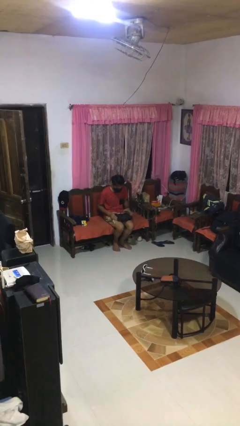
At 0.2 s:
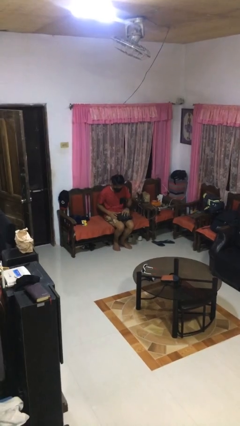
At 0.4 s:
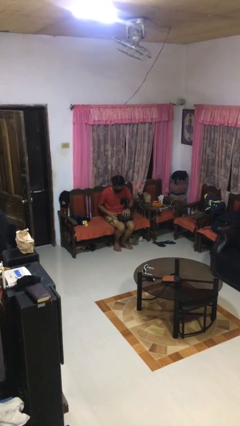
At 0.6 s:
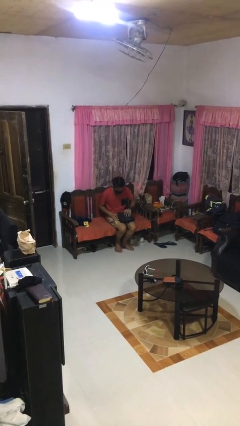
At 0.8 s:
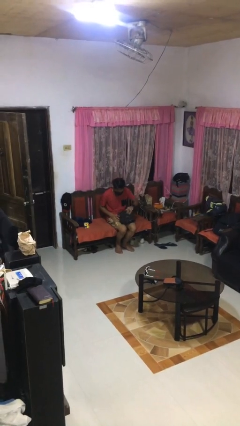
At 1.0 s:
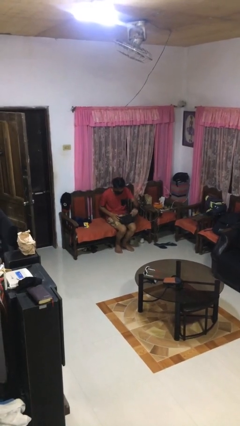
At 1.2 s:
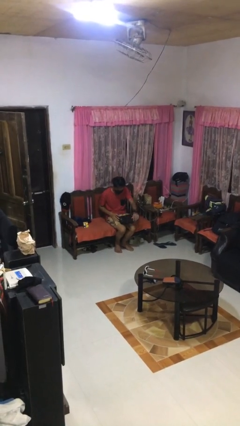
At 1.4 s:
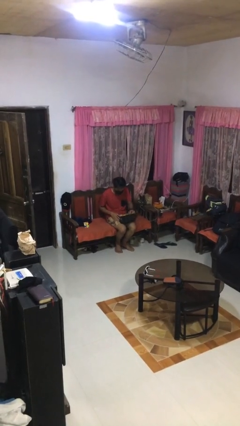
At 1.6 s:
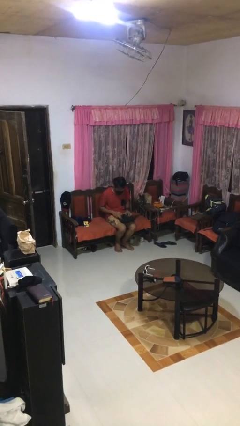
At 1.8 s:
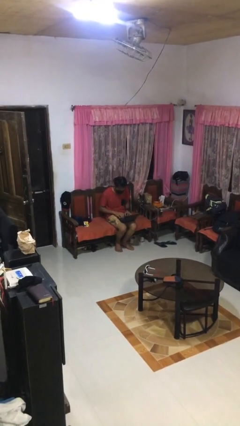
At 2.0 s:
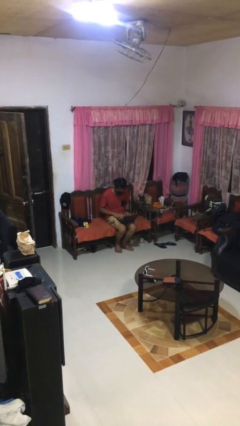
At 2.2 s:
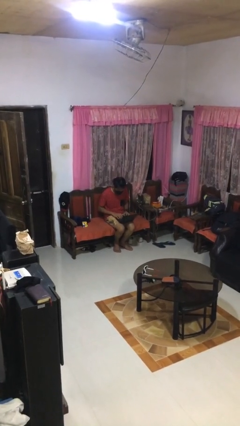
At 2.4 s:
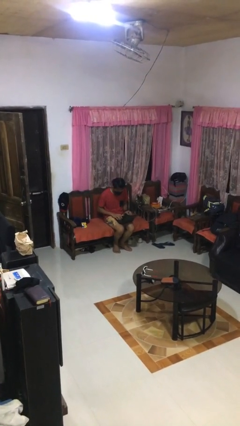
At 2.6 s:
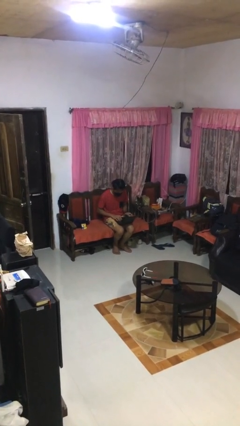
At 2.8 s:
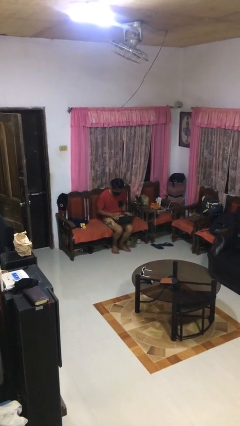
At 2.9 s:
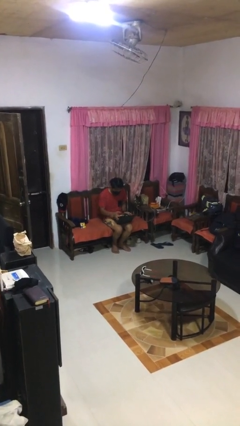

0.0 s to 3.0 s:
person opens laptop

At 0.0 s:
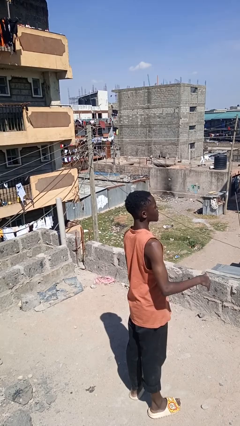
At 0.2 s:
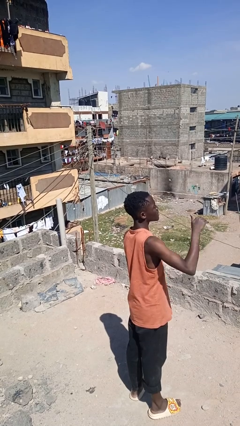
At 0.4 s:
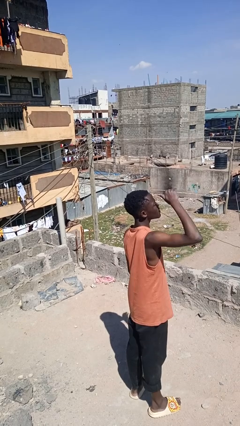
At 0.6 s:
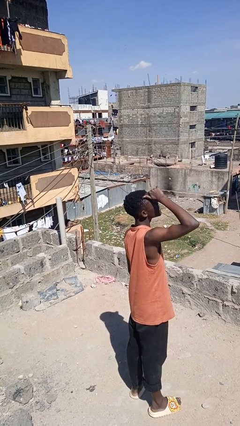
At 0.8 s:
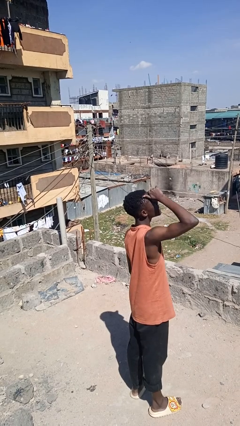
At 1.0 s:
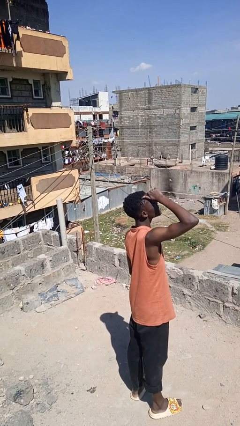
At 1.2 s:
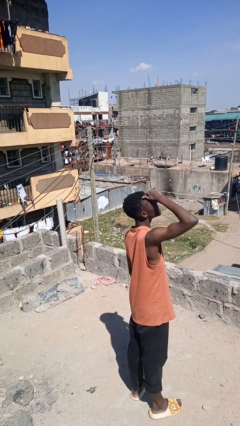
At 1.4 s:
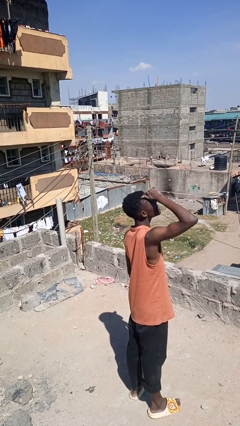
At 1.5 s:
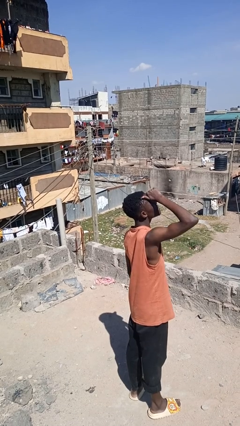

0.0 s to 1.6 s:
person shades eyes

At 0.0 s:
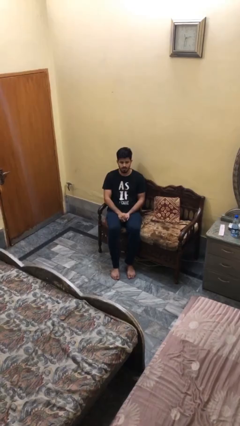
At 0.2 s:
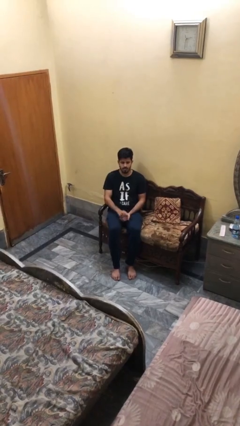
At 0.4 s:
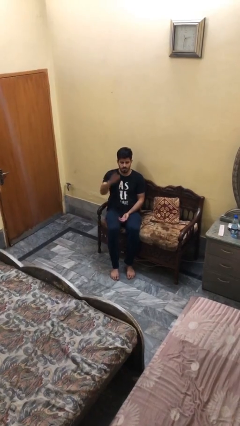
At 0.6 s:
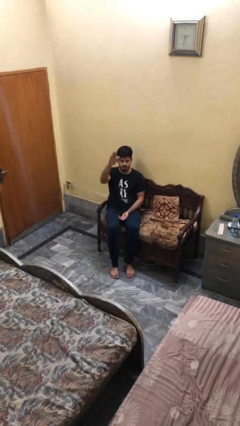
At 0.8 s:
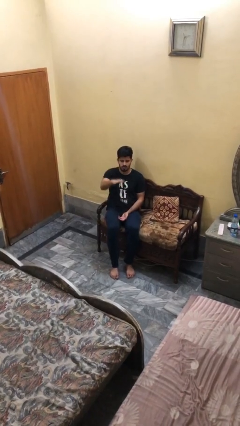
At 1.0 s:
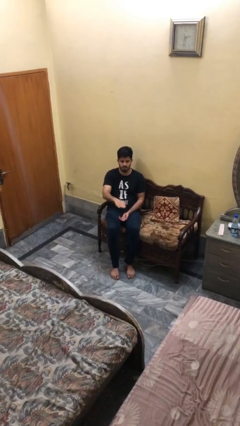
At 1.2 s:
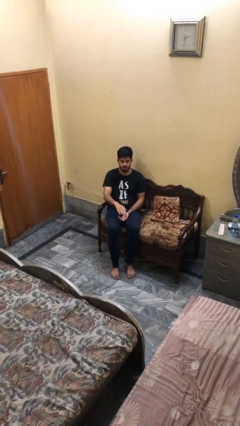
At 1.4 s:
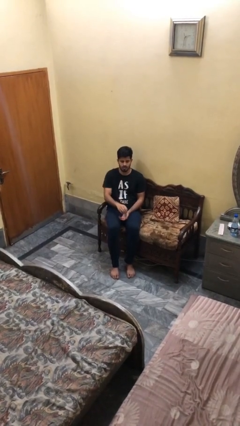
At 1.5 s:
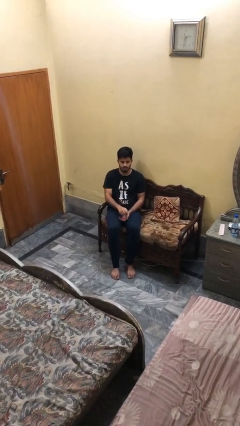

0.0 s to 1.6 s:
person gestures swipe down

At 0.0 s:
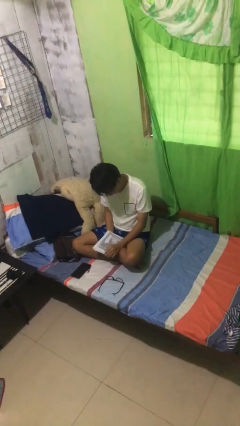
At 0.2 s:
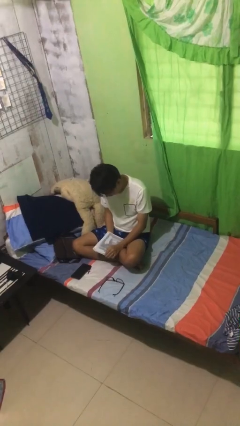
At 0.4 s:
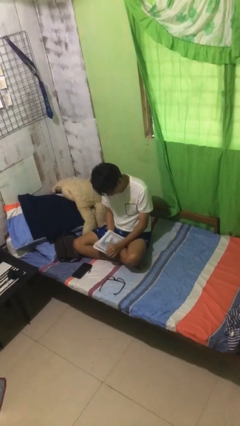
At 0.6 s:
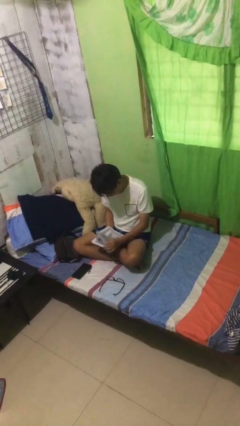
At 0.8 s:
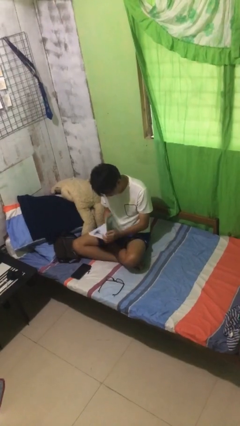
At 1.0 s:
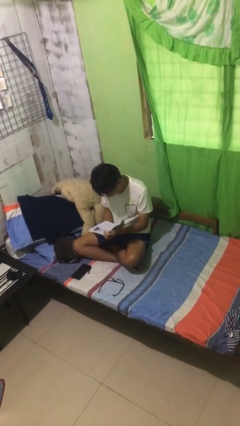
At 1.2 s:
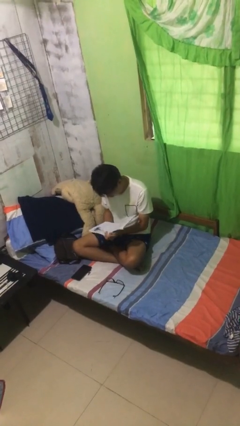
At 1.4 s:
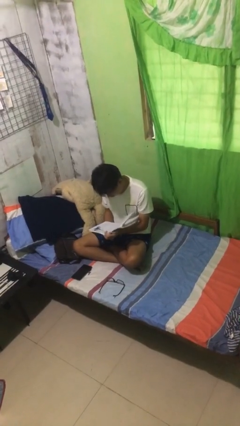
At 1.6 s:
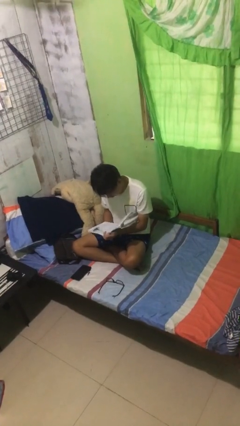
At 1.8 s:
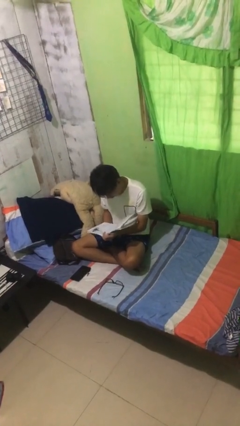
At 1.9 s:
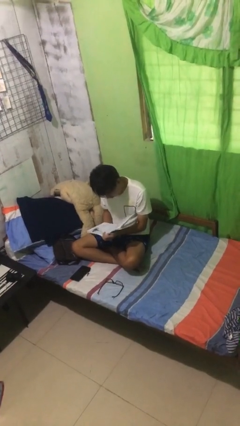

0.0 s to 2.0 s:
person reads document

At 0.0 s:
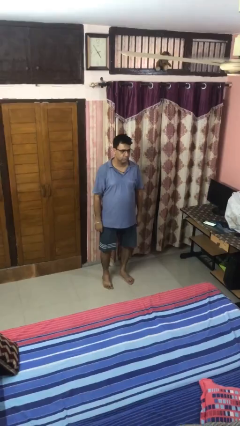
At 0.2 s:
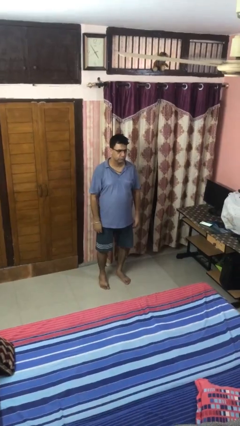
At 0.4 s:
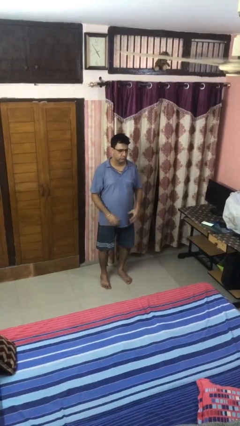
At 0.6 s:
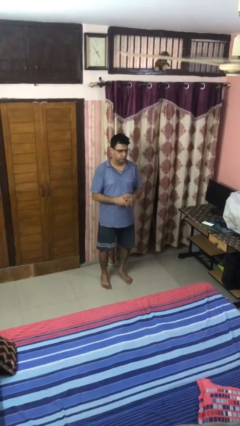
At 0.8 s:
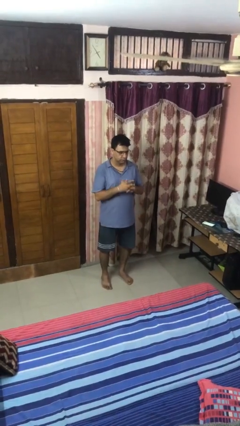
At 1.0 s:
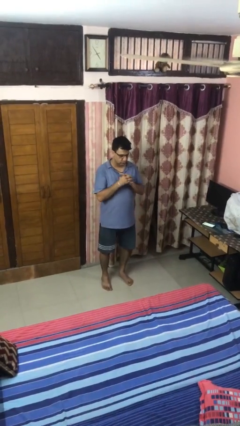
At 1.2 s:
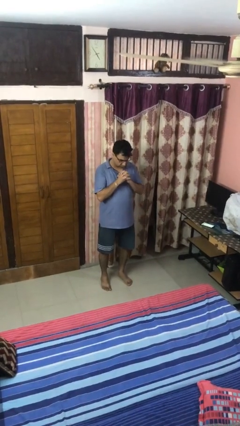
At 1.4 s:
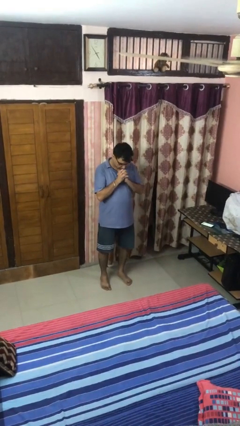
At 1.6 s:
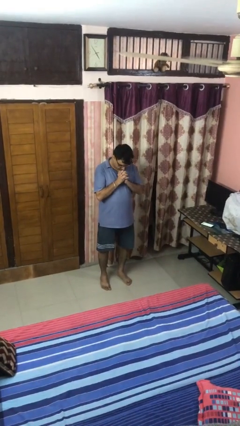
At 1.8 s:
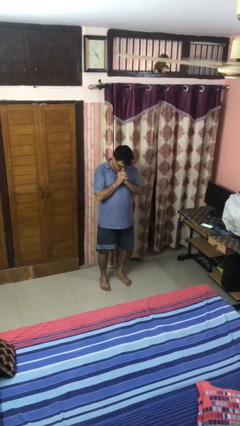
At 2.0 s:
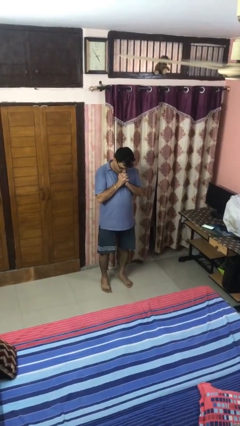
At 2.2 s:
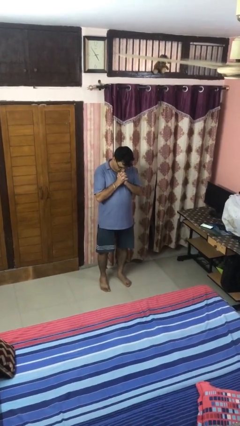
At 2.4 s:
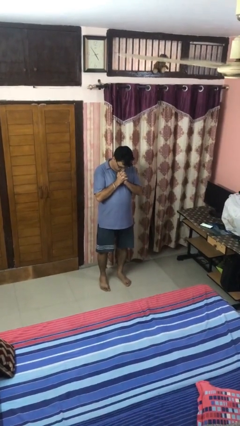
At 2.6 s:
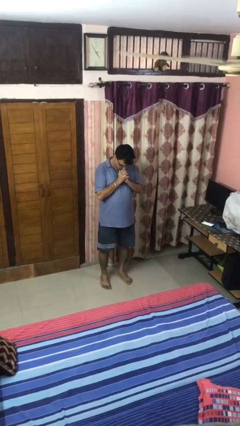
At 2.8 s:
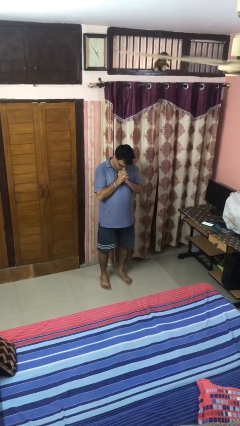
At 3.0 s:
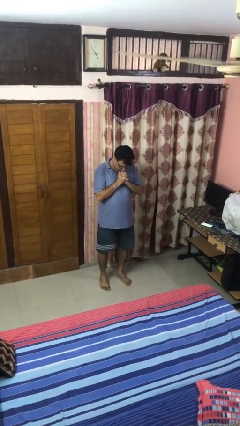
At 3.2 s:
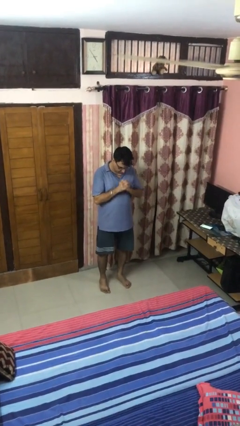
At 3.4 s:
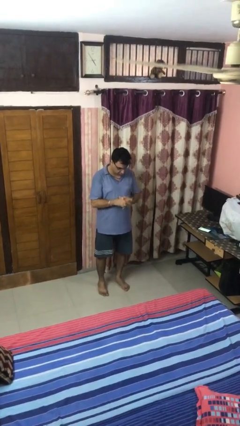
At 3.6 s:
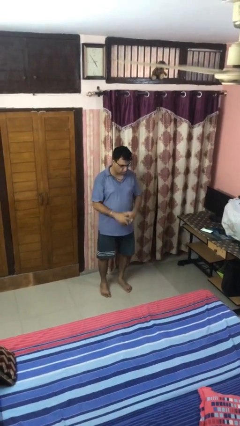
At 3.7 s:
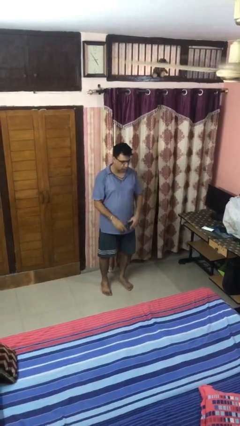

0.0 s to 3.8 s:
person prays

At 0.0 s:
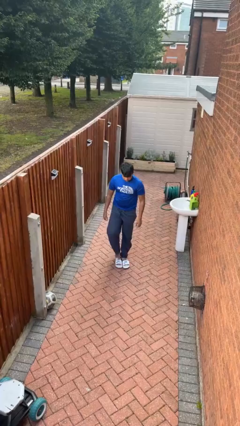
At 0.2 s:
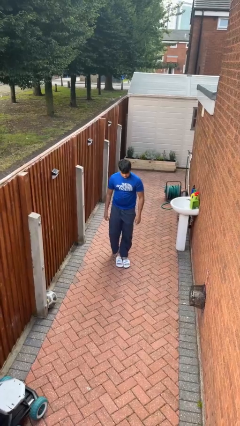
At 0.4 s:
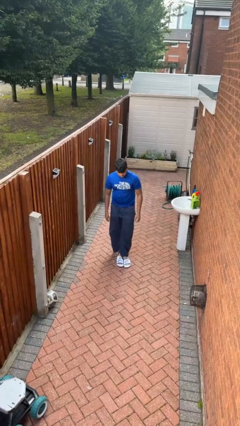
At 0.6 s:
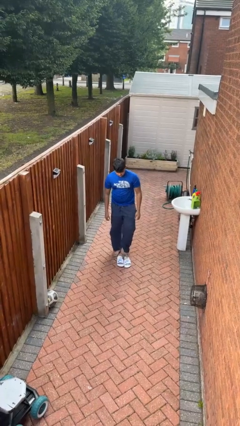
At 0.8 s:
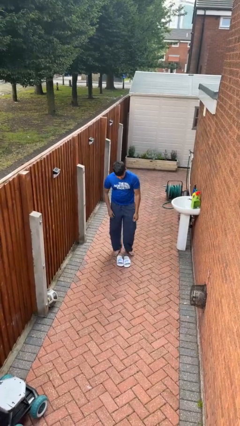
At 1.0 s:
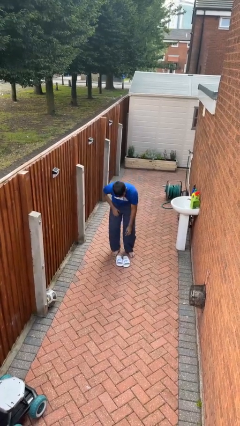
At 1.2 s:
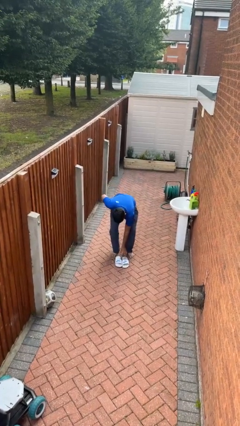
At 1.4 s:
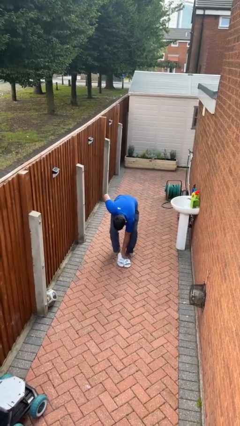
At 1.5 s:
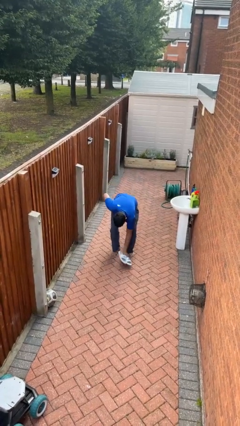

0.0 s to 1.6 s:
person takes off shoes

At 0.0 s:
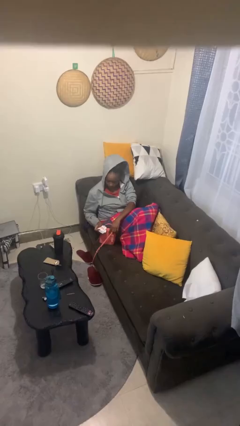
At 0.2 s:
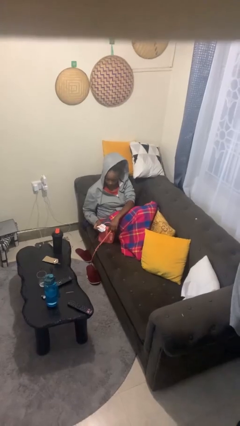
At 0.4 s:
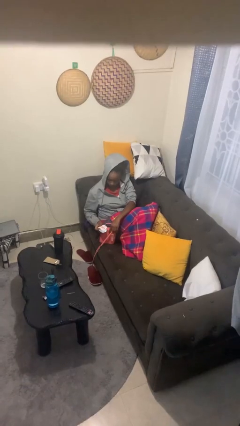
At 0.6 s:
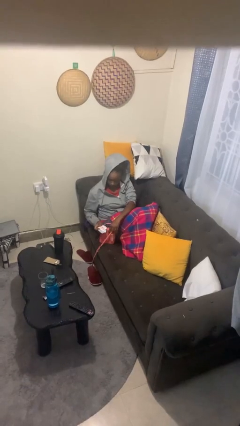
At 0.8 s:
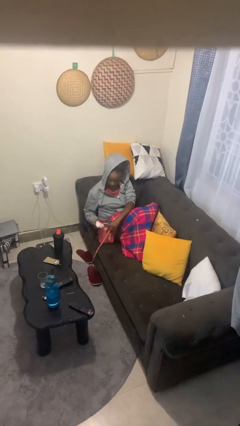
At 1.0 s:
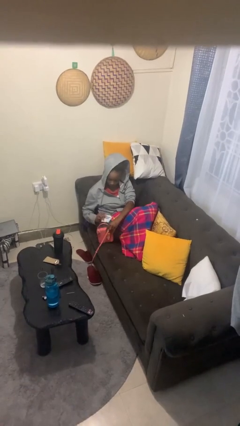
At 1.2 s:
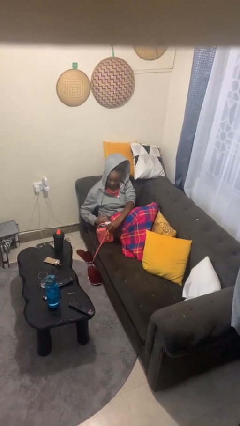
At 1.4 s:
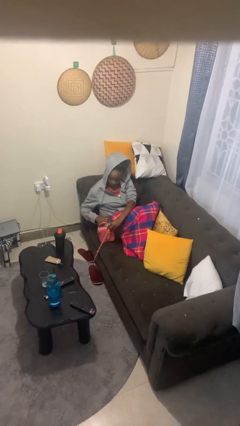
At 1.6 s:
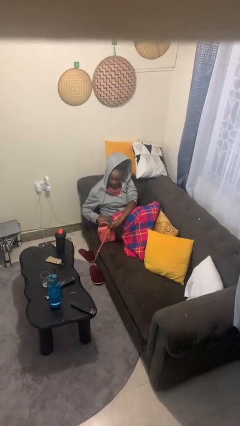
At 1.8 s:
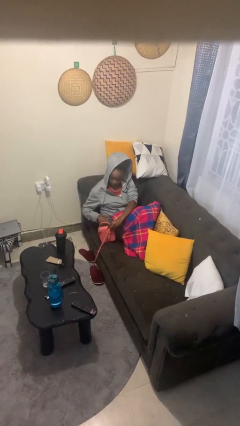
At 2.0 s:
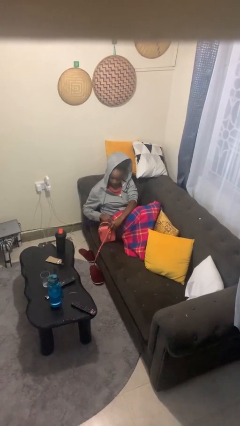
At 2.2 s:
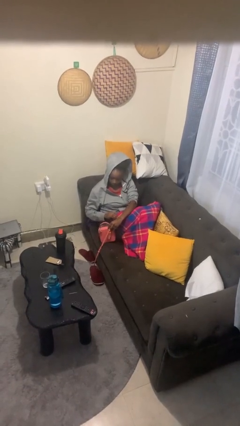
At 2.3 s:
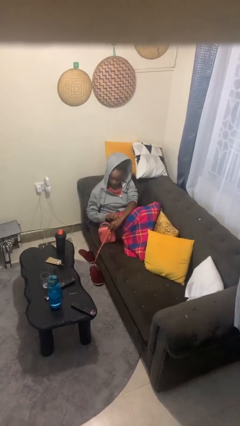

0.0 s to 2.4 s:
person puts object into purse

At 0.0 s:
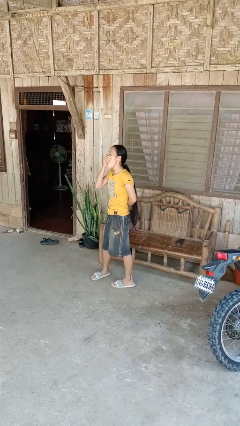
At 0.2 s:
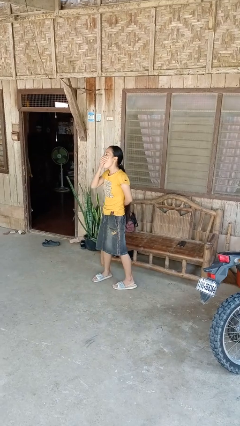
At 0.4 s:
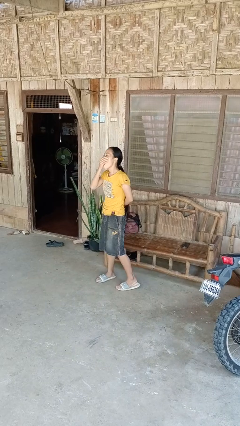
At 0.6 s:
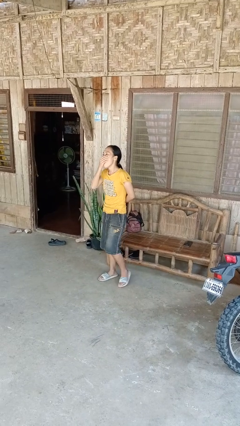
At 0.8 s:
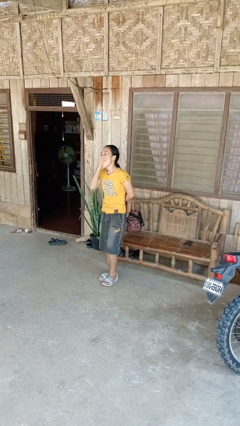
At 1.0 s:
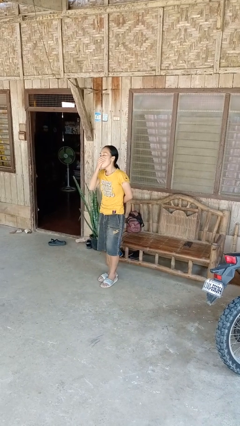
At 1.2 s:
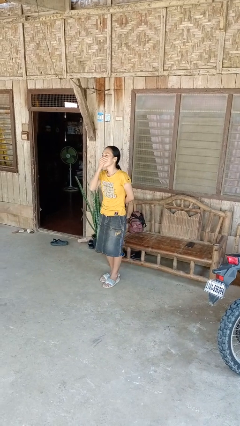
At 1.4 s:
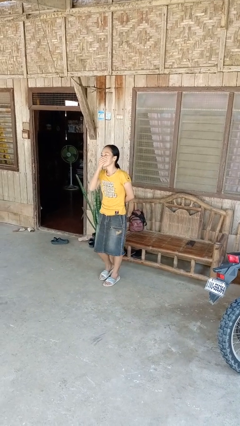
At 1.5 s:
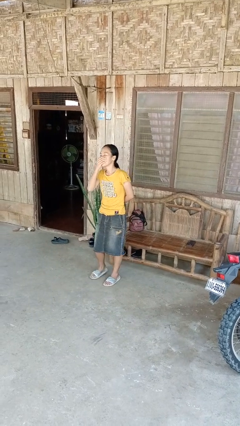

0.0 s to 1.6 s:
person yawns
